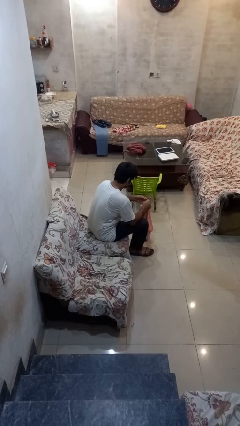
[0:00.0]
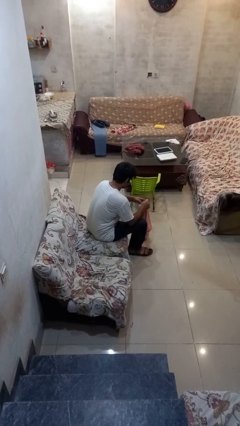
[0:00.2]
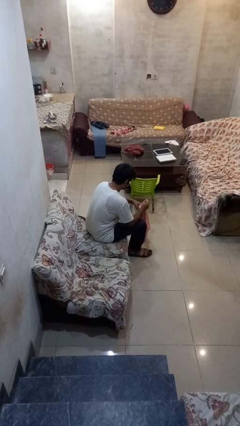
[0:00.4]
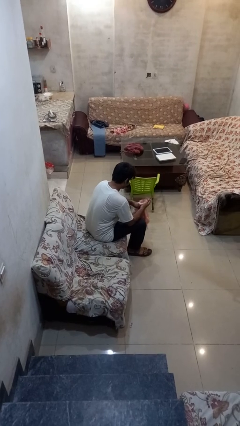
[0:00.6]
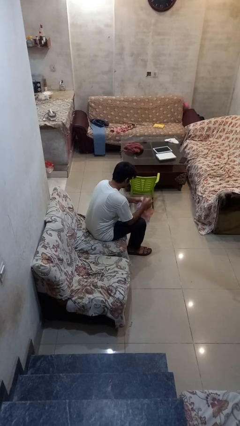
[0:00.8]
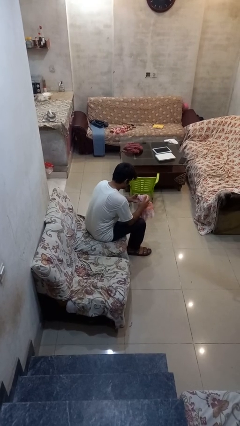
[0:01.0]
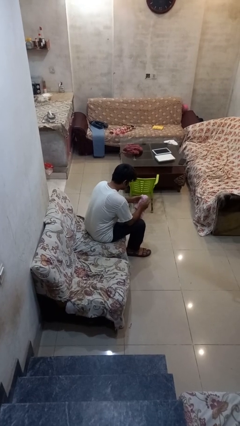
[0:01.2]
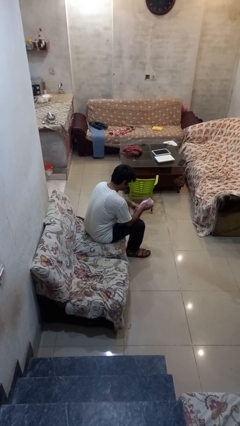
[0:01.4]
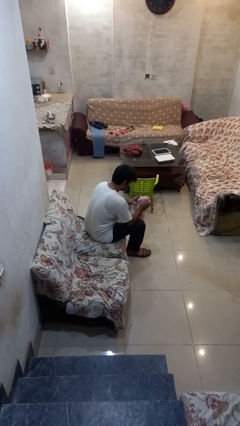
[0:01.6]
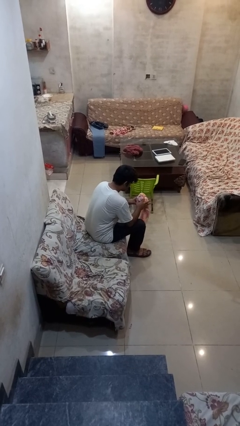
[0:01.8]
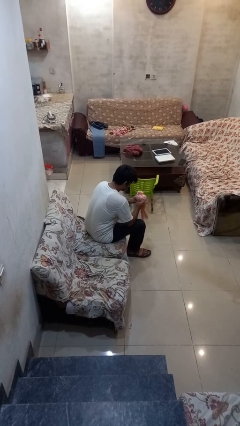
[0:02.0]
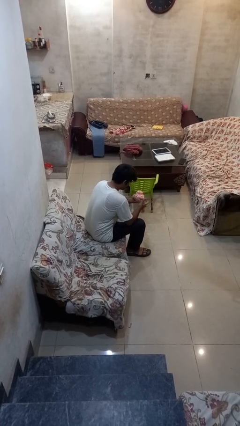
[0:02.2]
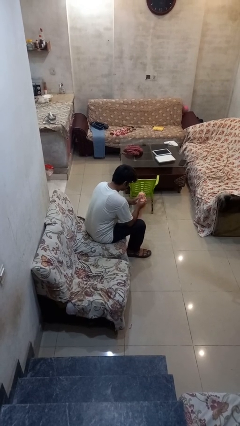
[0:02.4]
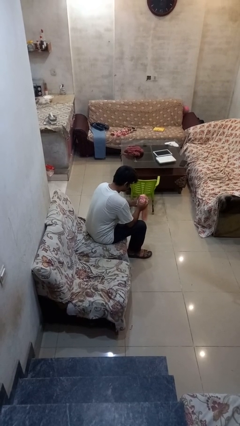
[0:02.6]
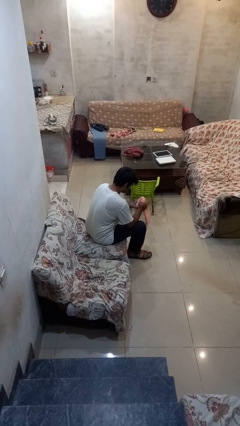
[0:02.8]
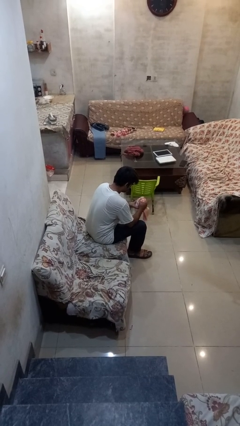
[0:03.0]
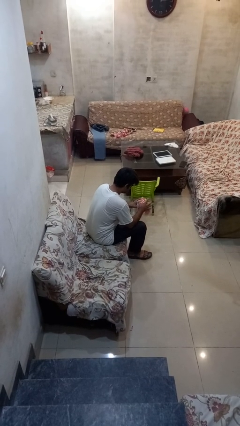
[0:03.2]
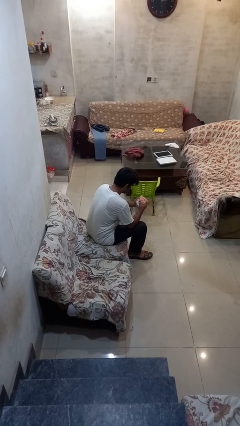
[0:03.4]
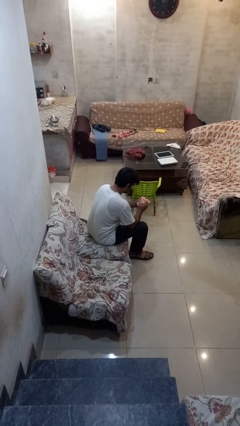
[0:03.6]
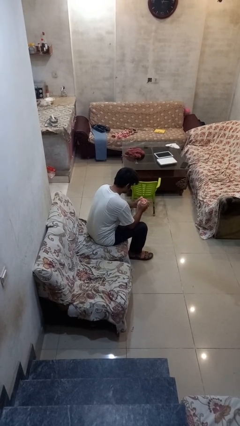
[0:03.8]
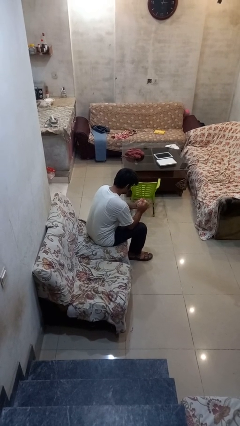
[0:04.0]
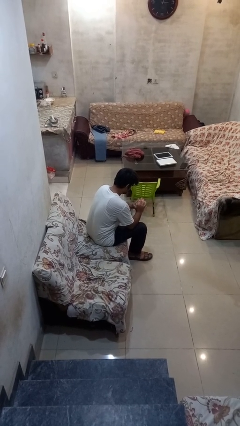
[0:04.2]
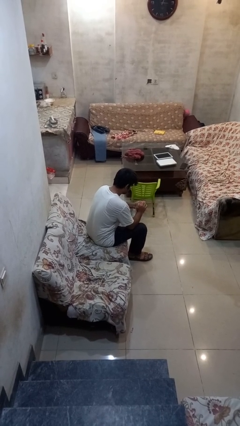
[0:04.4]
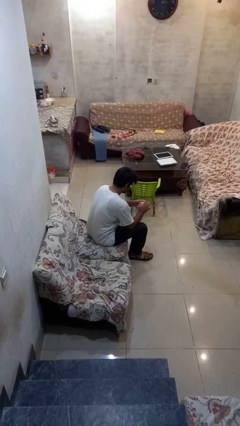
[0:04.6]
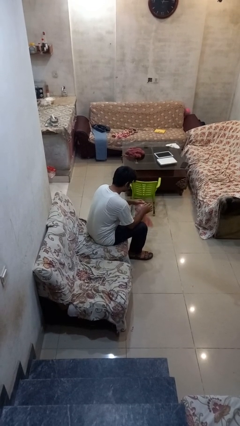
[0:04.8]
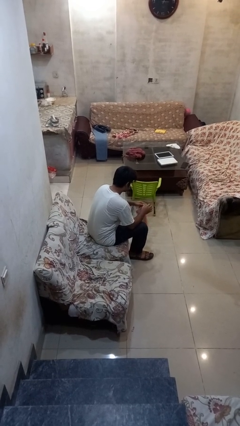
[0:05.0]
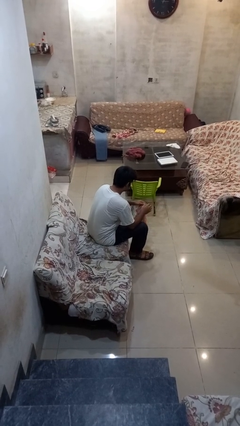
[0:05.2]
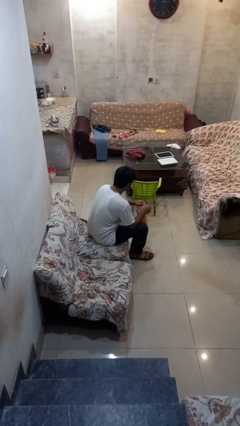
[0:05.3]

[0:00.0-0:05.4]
person squeezes object

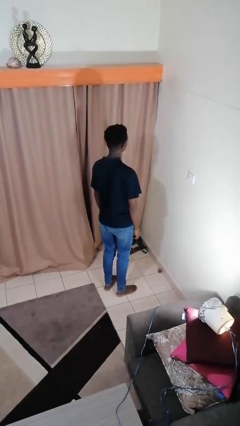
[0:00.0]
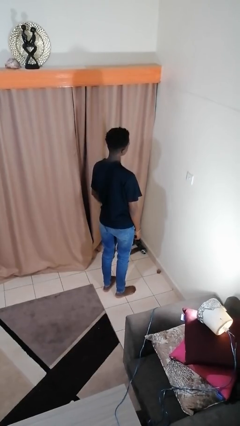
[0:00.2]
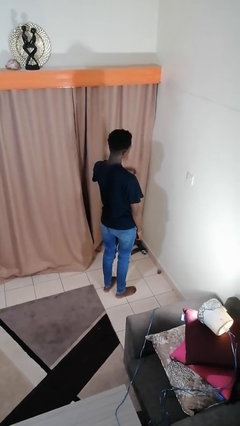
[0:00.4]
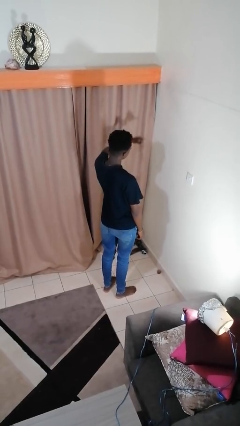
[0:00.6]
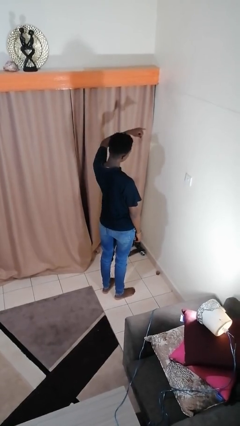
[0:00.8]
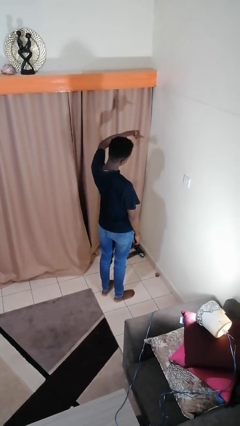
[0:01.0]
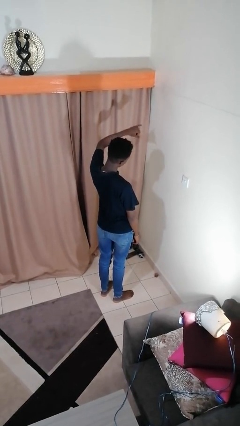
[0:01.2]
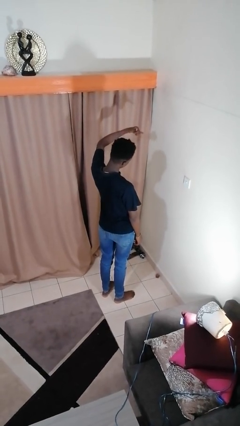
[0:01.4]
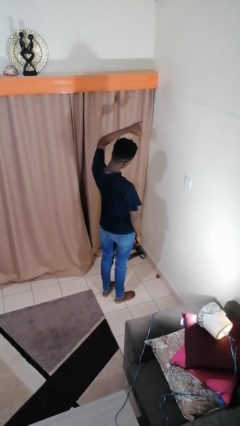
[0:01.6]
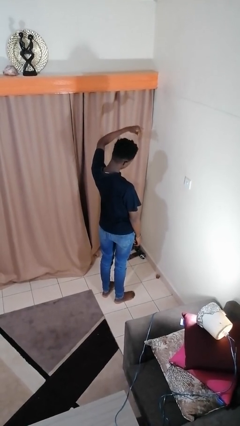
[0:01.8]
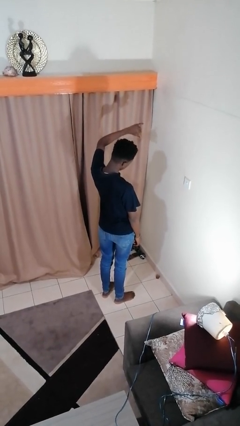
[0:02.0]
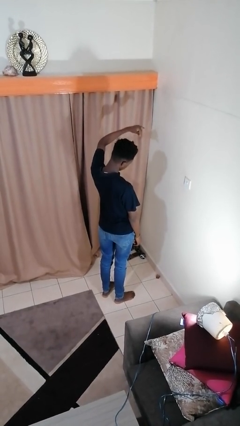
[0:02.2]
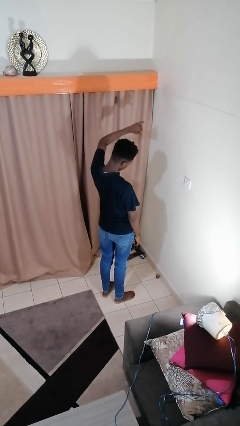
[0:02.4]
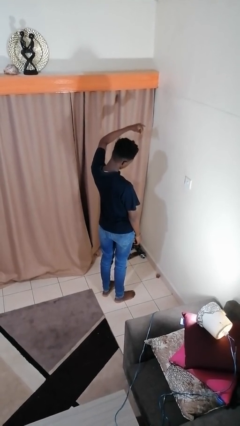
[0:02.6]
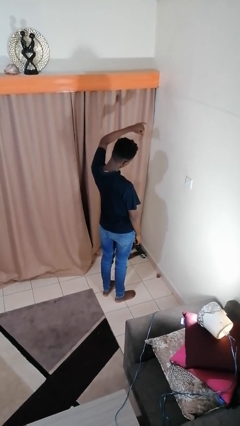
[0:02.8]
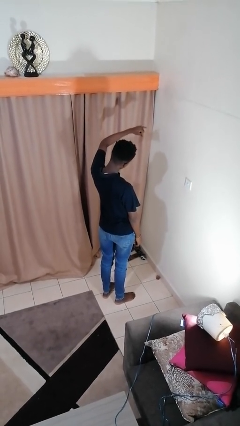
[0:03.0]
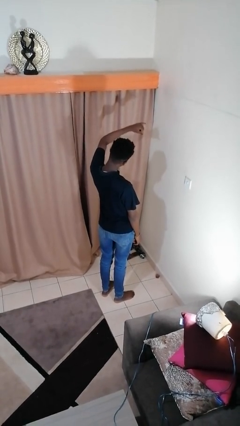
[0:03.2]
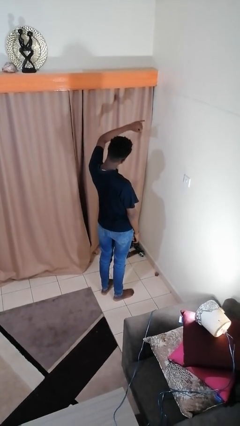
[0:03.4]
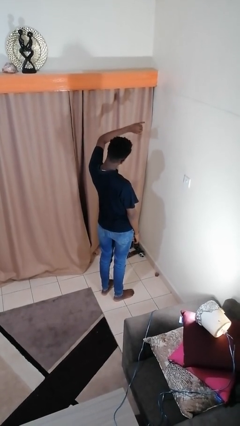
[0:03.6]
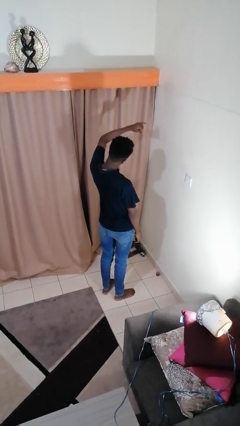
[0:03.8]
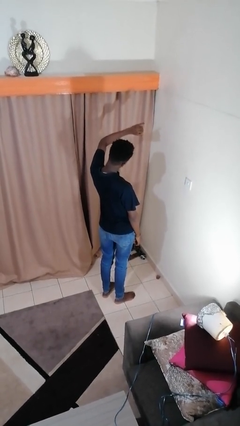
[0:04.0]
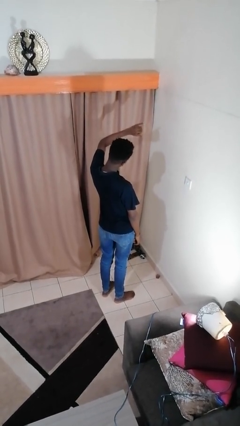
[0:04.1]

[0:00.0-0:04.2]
person gestures hang loose

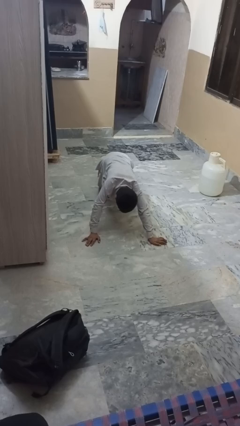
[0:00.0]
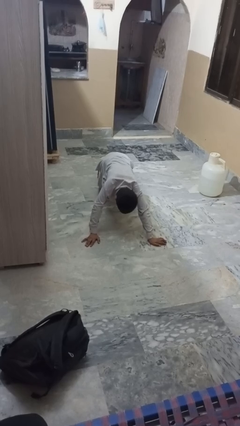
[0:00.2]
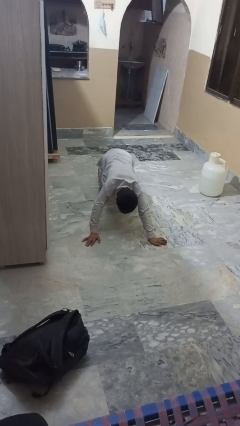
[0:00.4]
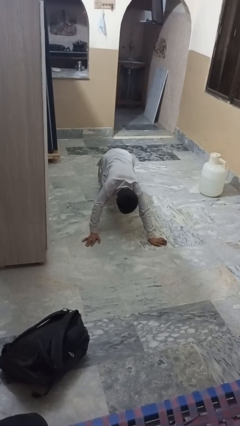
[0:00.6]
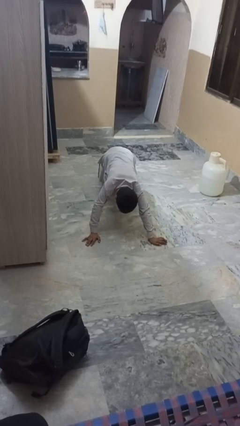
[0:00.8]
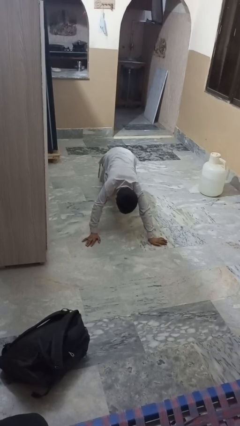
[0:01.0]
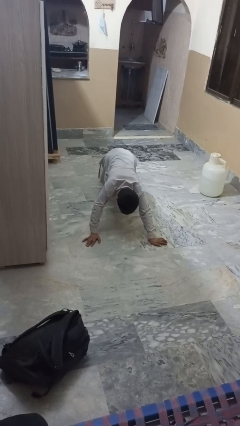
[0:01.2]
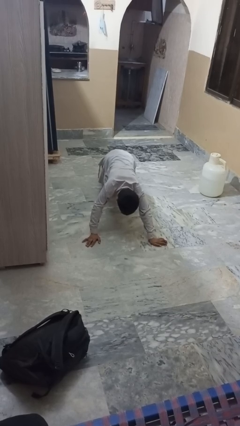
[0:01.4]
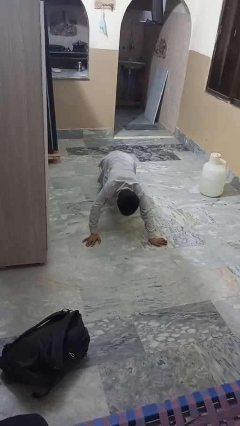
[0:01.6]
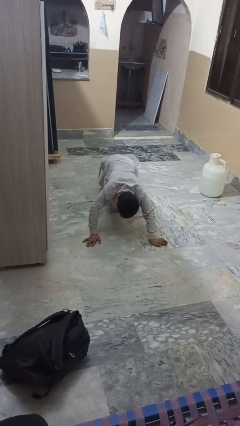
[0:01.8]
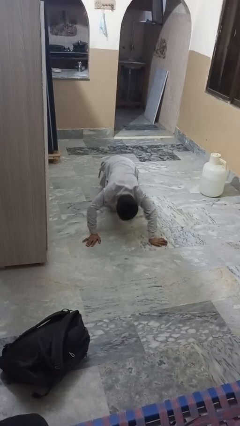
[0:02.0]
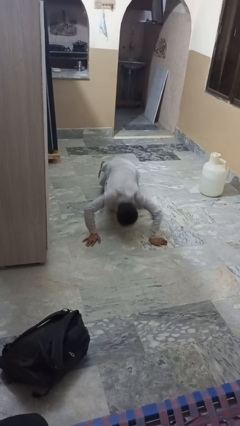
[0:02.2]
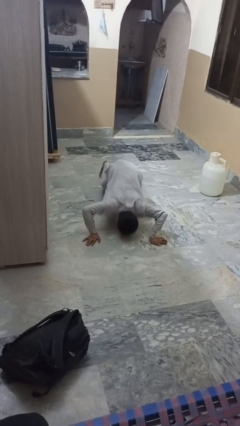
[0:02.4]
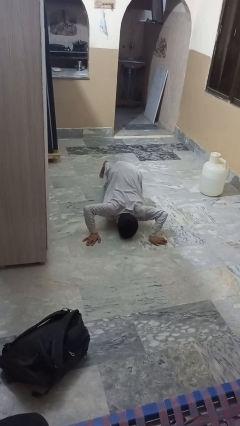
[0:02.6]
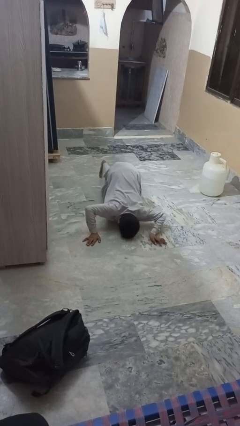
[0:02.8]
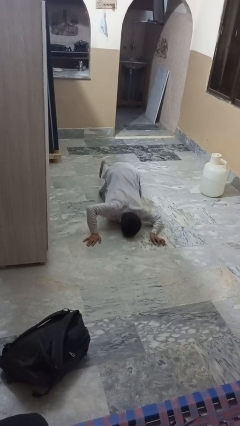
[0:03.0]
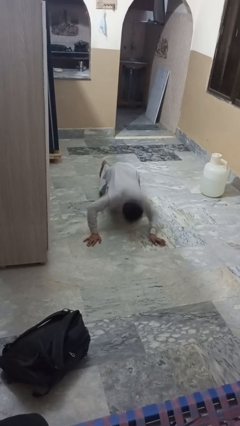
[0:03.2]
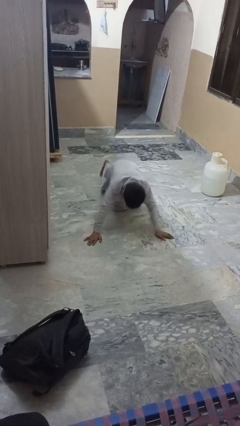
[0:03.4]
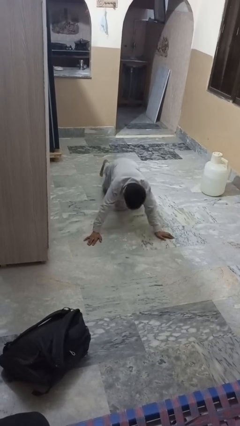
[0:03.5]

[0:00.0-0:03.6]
person exercises with pushup

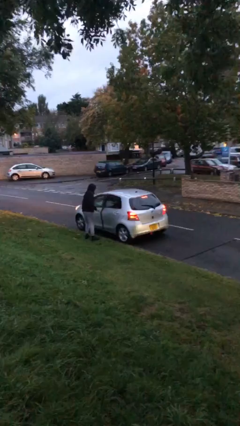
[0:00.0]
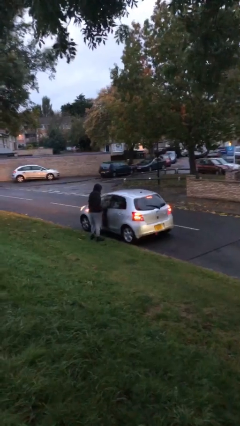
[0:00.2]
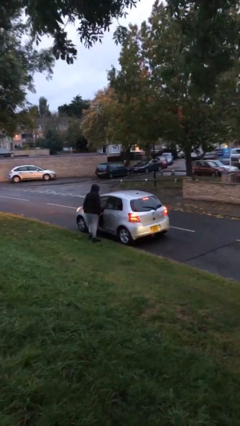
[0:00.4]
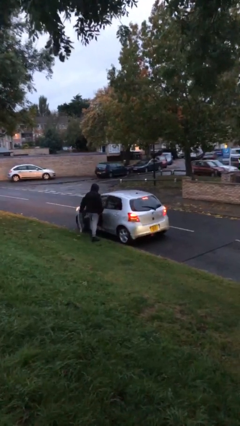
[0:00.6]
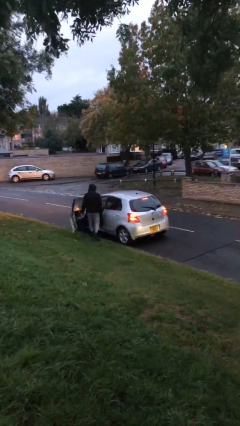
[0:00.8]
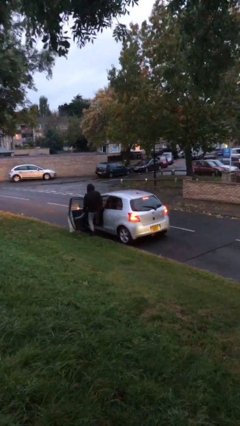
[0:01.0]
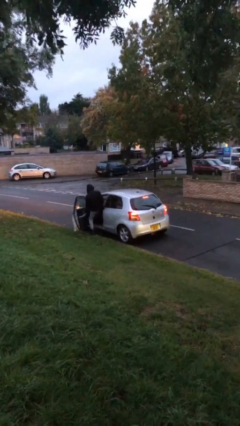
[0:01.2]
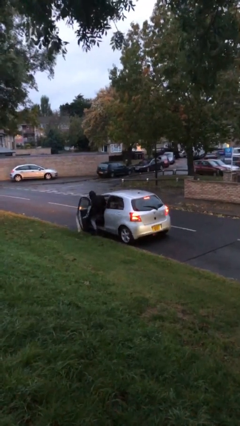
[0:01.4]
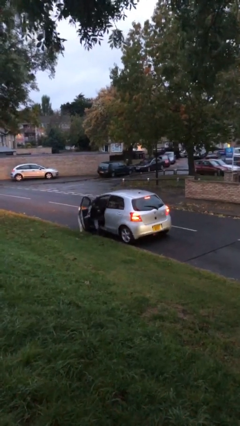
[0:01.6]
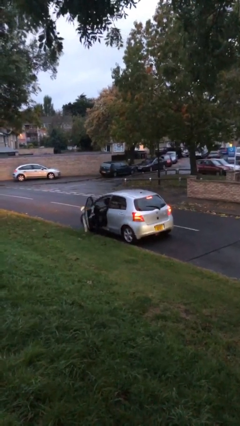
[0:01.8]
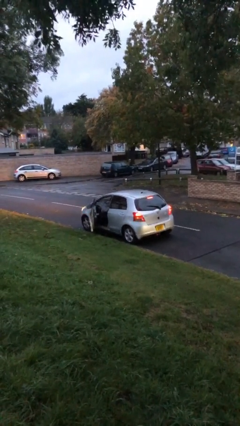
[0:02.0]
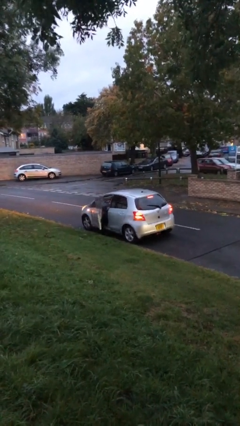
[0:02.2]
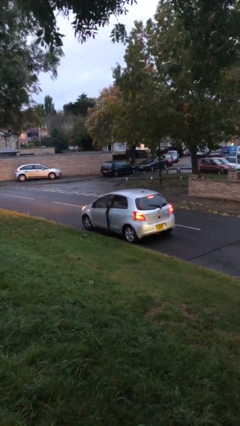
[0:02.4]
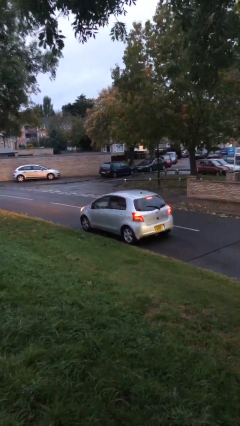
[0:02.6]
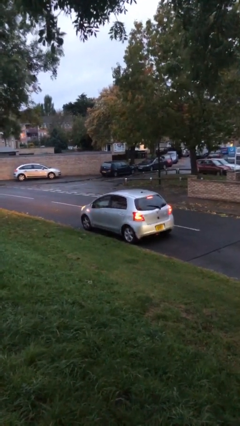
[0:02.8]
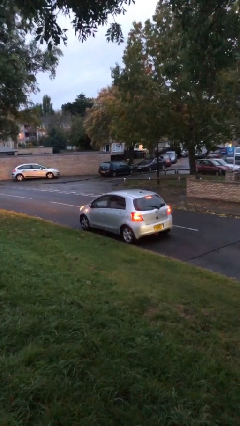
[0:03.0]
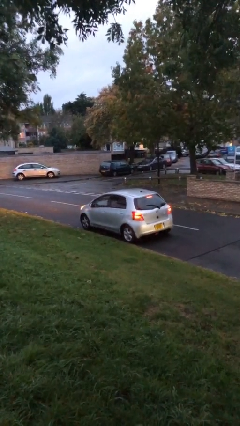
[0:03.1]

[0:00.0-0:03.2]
car picks up person

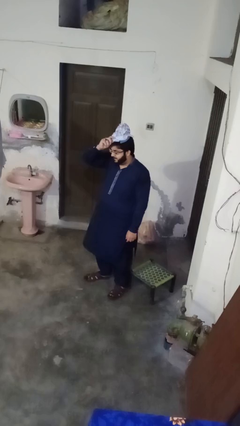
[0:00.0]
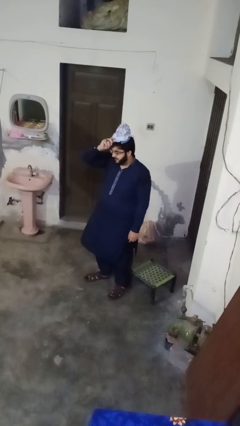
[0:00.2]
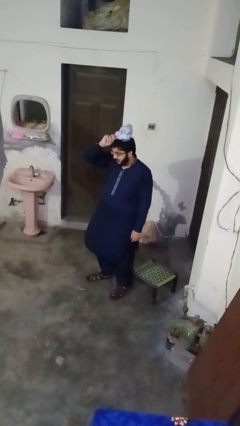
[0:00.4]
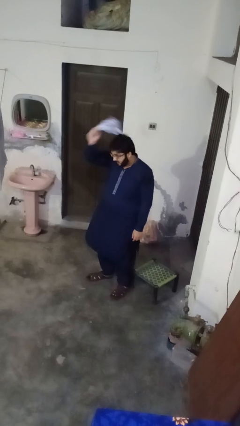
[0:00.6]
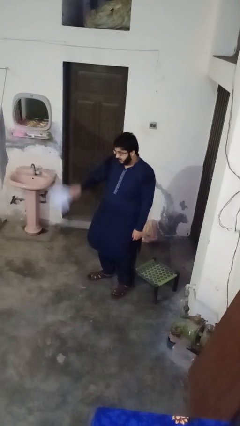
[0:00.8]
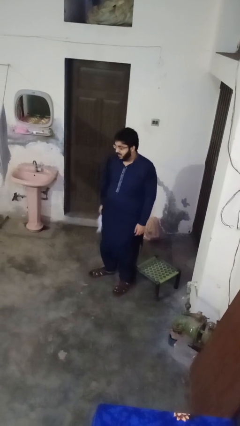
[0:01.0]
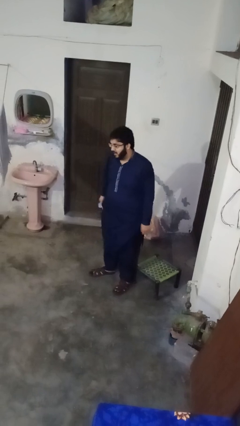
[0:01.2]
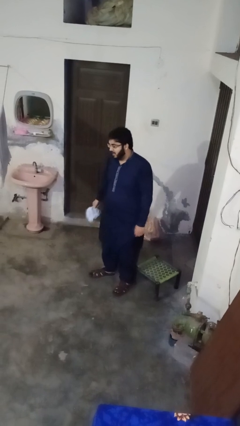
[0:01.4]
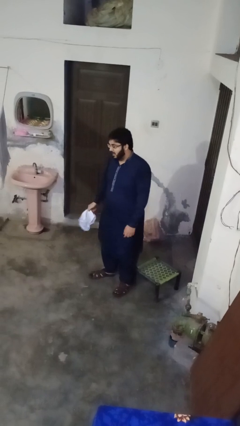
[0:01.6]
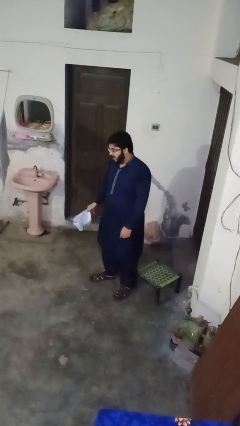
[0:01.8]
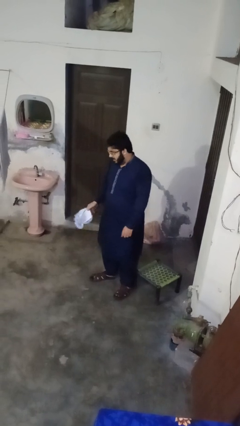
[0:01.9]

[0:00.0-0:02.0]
person takes off hat
